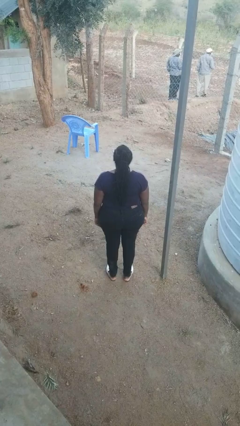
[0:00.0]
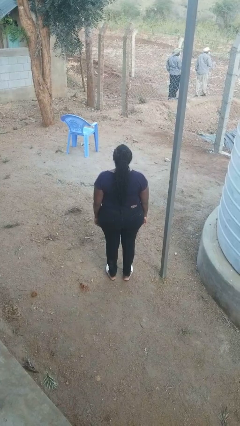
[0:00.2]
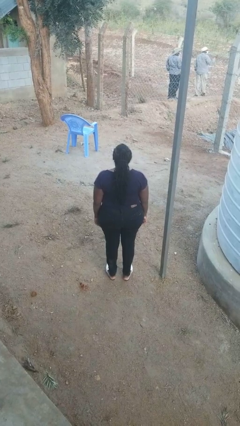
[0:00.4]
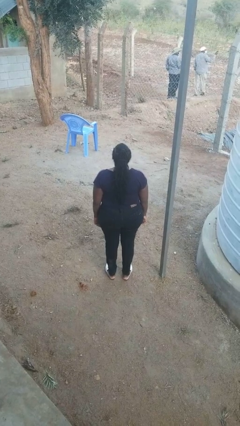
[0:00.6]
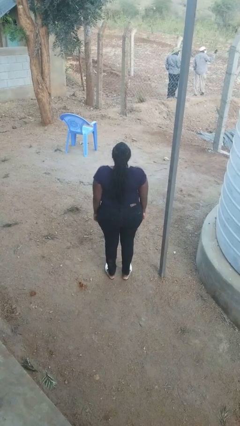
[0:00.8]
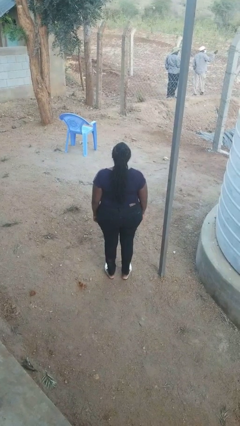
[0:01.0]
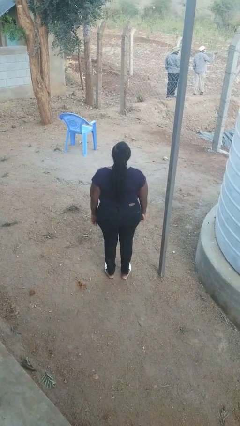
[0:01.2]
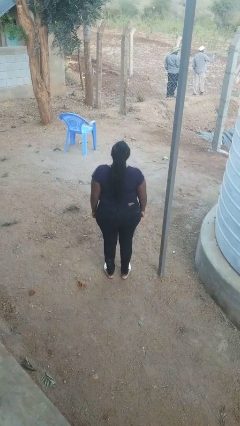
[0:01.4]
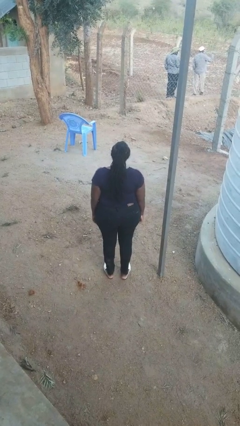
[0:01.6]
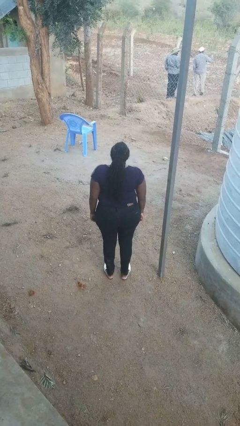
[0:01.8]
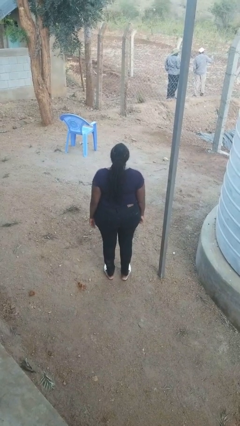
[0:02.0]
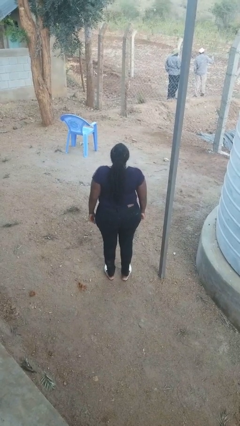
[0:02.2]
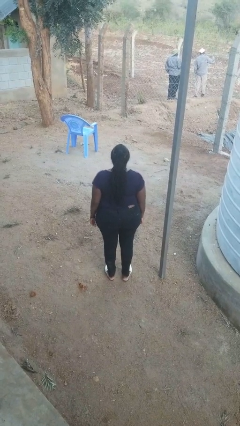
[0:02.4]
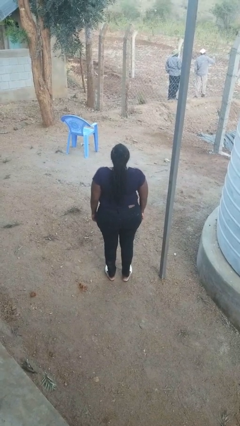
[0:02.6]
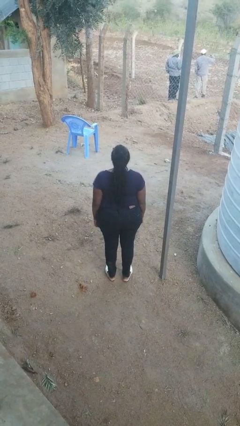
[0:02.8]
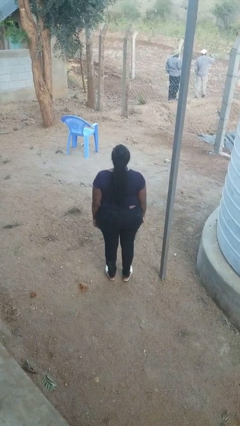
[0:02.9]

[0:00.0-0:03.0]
person shrugs

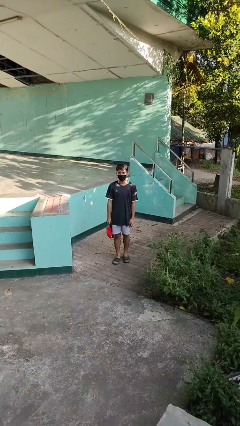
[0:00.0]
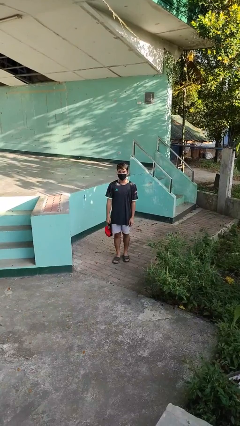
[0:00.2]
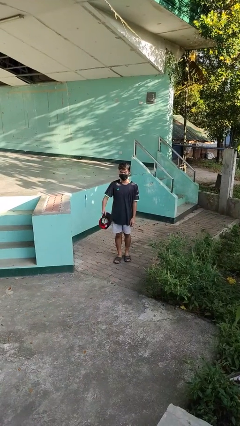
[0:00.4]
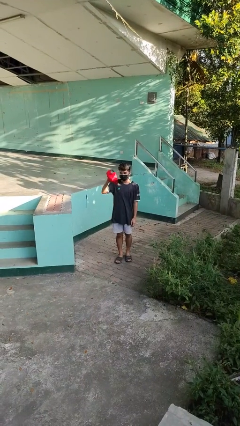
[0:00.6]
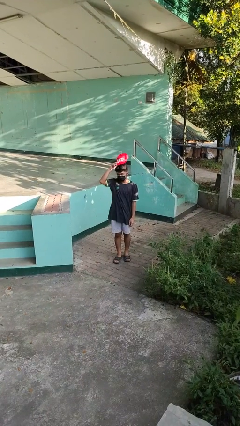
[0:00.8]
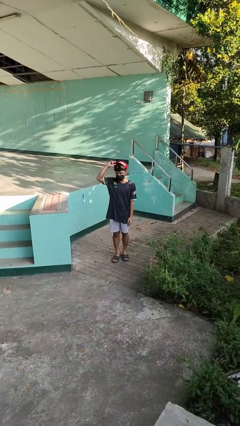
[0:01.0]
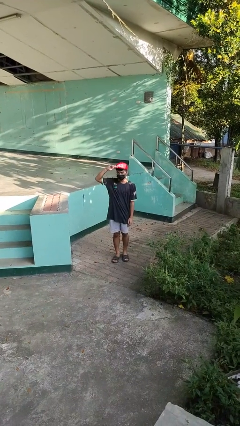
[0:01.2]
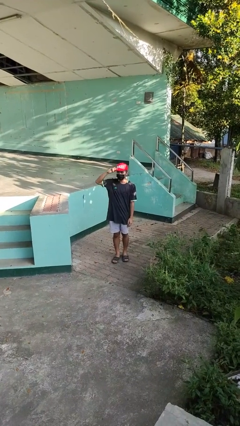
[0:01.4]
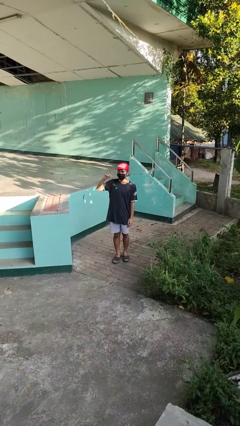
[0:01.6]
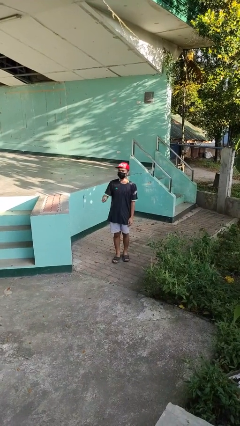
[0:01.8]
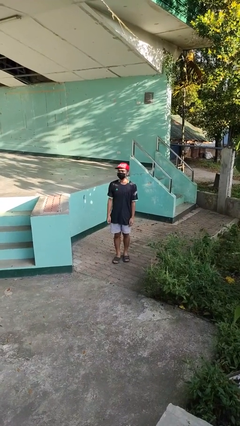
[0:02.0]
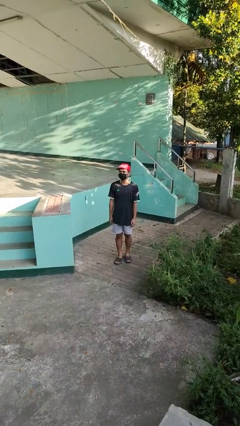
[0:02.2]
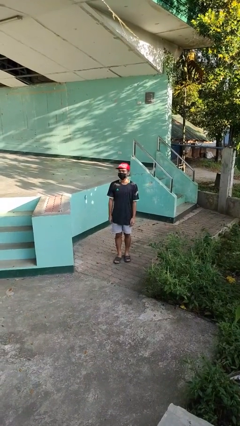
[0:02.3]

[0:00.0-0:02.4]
person puts on hat

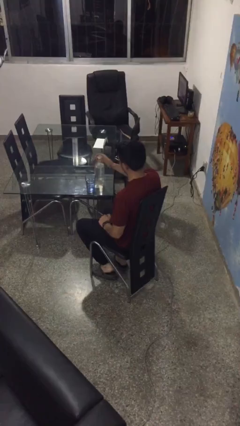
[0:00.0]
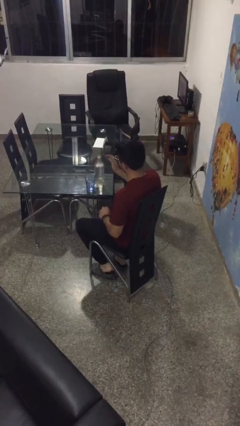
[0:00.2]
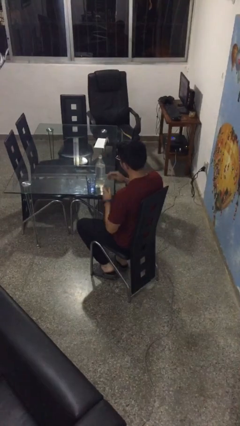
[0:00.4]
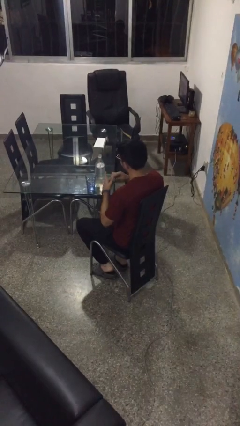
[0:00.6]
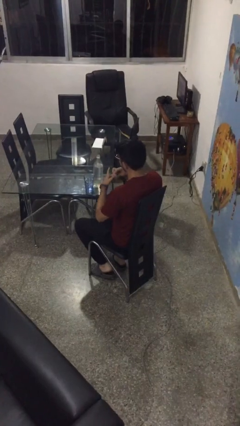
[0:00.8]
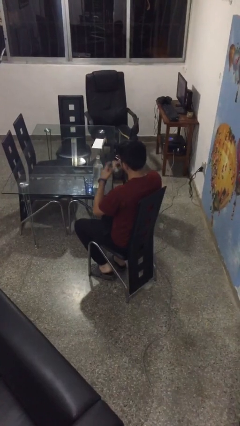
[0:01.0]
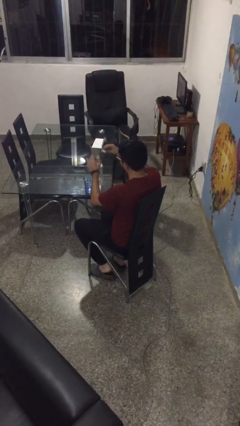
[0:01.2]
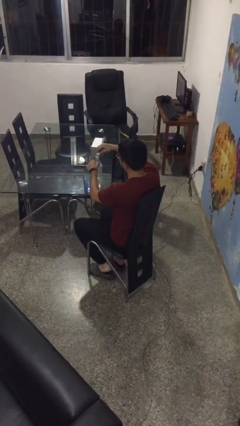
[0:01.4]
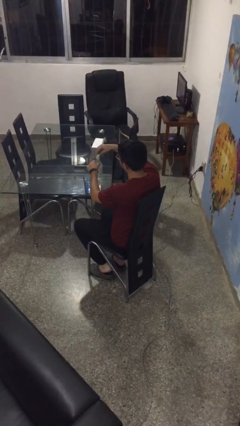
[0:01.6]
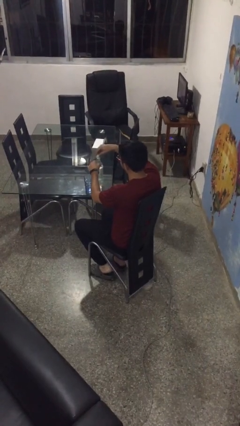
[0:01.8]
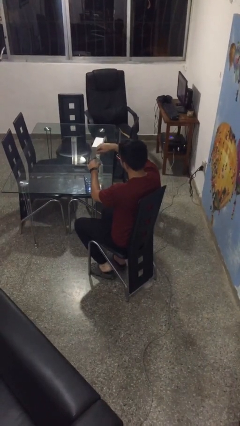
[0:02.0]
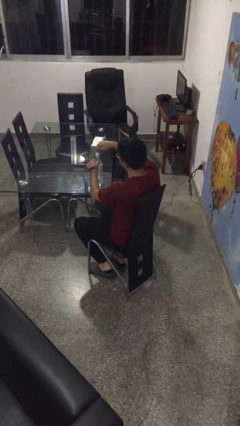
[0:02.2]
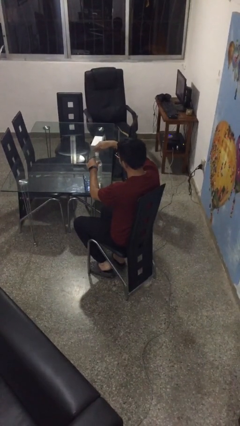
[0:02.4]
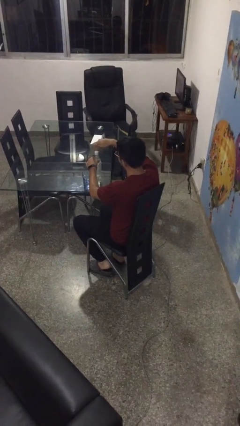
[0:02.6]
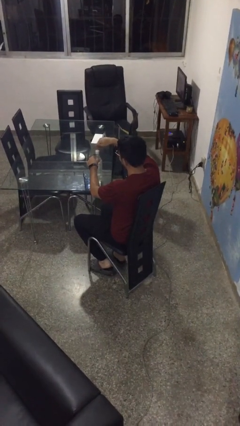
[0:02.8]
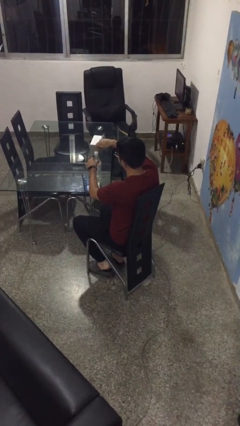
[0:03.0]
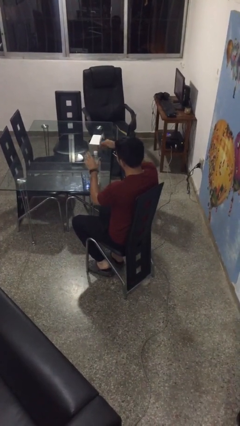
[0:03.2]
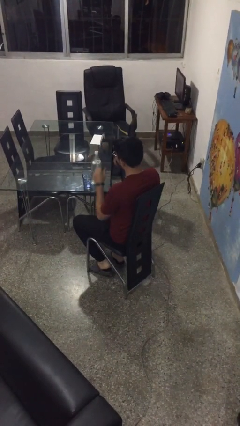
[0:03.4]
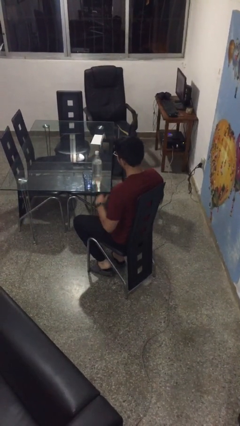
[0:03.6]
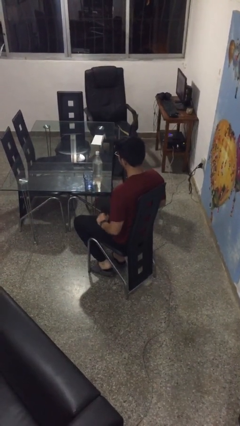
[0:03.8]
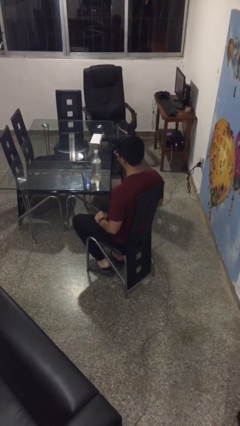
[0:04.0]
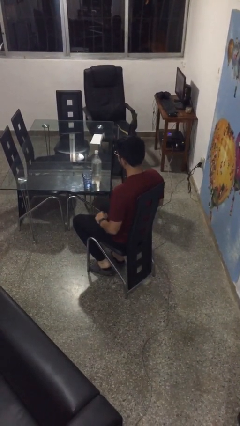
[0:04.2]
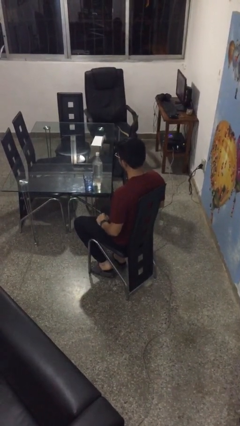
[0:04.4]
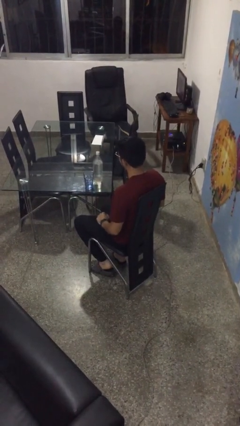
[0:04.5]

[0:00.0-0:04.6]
person screws lid to bottle

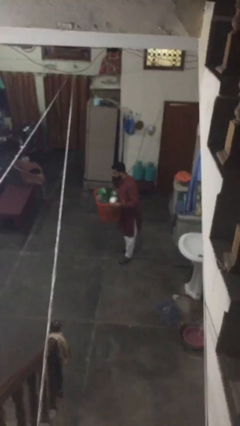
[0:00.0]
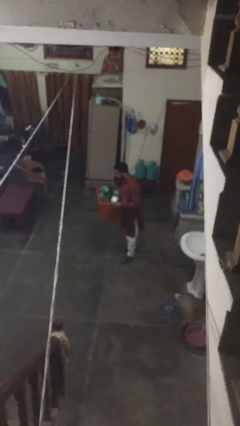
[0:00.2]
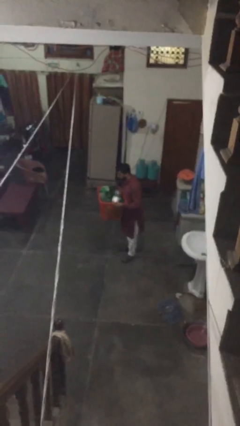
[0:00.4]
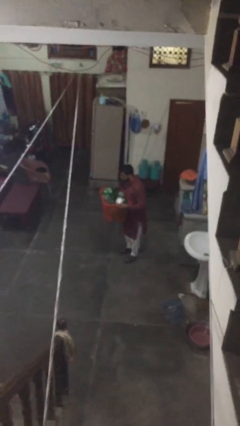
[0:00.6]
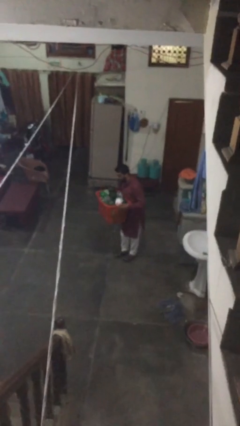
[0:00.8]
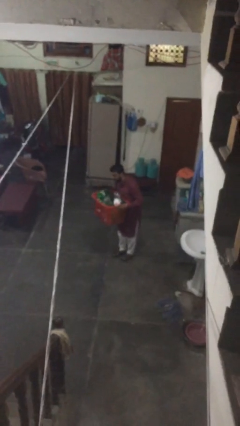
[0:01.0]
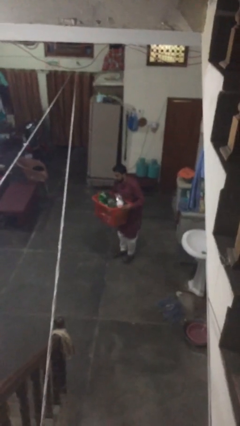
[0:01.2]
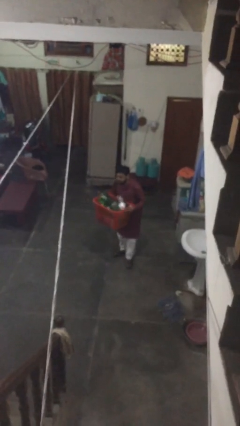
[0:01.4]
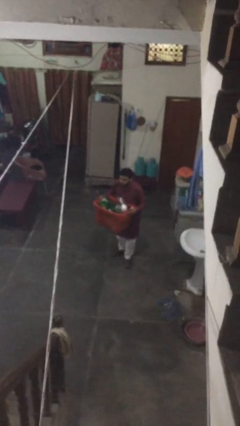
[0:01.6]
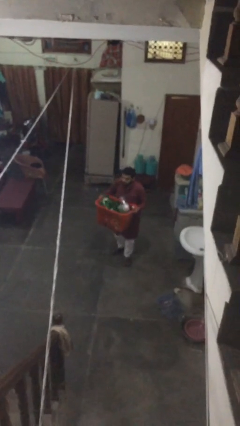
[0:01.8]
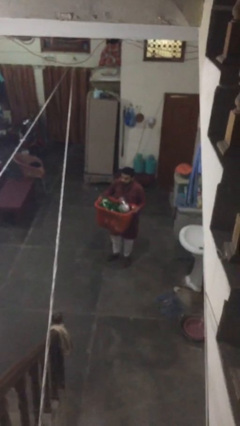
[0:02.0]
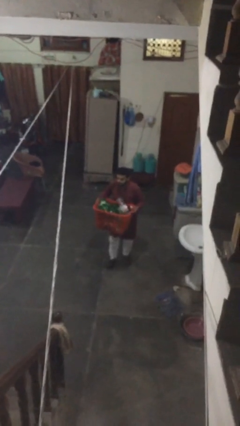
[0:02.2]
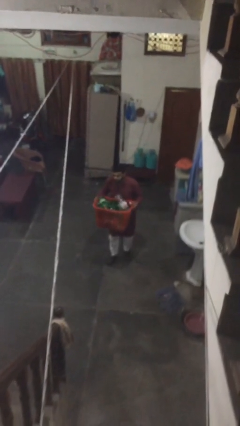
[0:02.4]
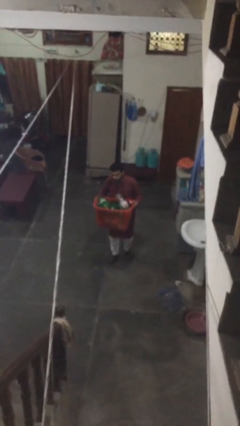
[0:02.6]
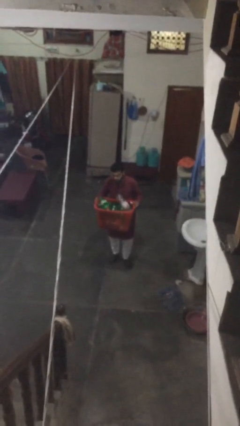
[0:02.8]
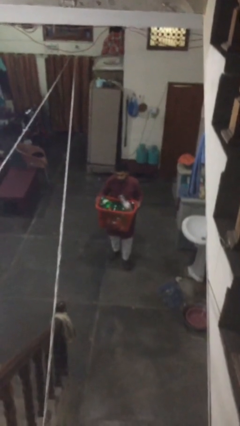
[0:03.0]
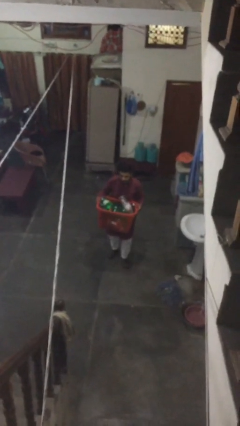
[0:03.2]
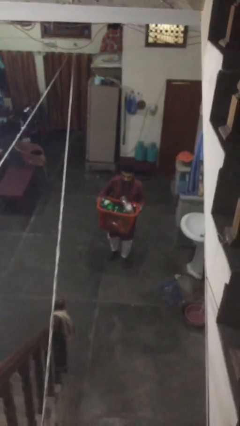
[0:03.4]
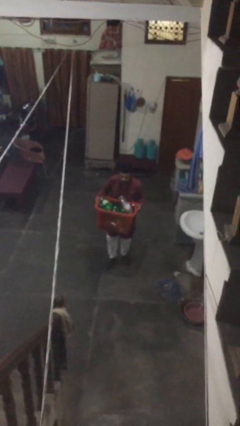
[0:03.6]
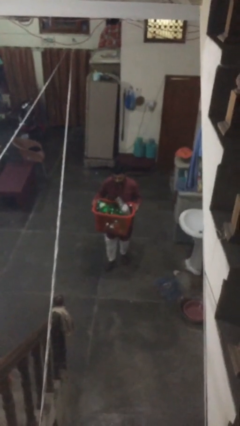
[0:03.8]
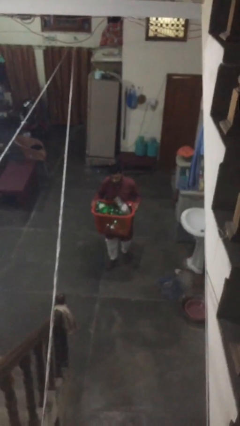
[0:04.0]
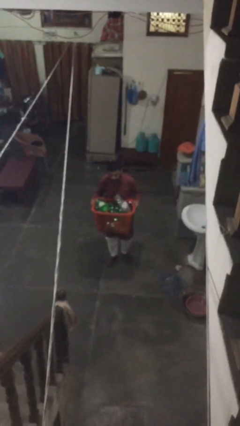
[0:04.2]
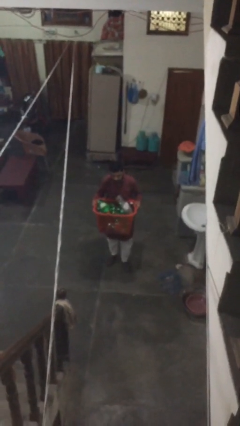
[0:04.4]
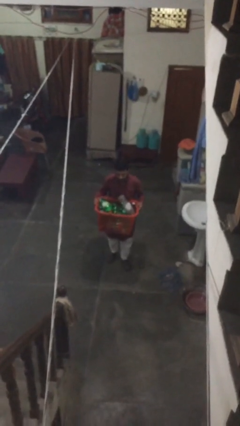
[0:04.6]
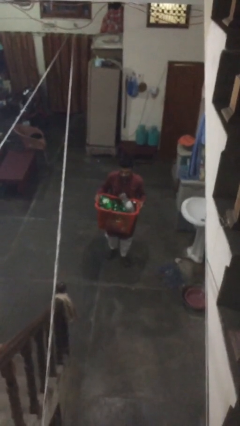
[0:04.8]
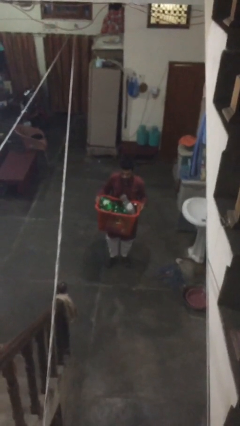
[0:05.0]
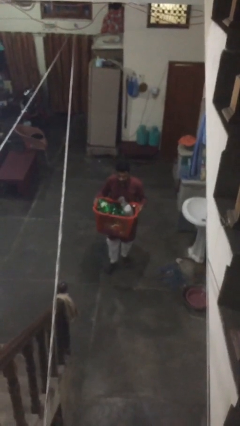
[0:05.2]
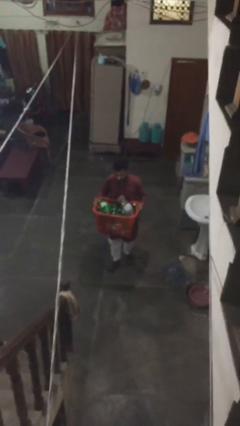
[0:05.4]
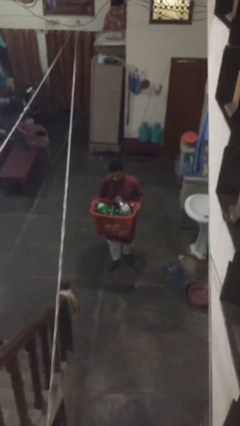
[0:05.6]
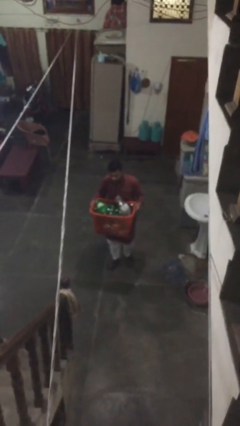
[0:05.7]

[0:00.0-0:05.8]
person carries heavy object

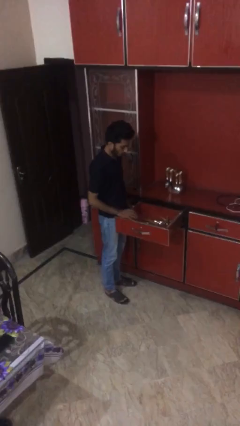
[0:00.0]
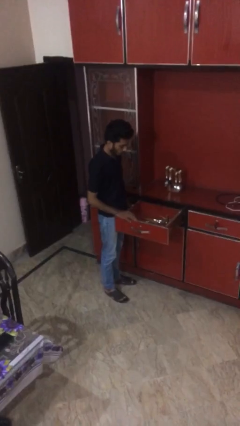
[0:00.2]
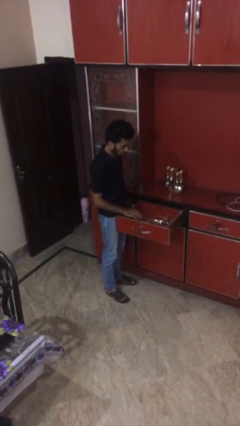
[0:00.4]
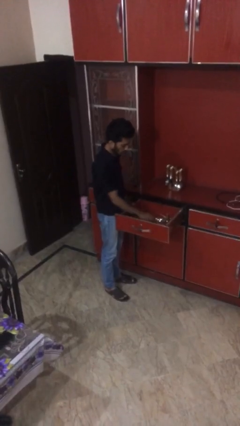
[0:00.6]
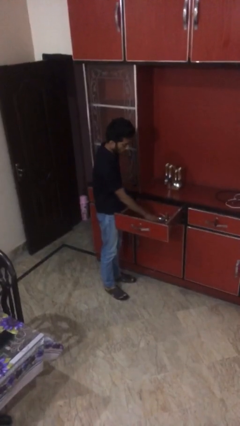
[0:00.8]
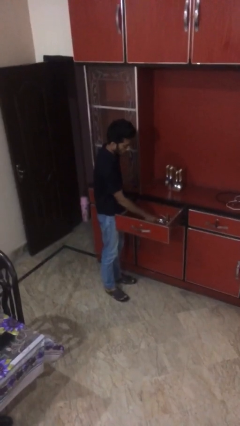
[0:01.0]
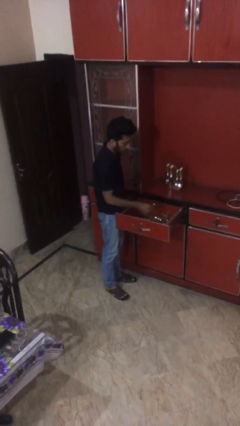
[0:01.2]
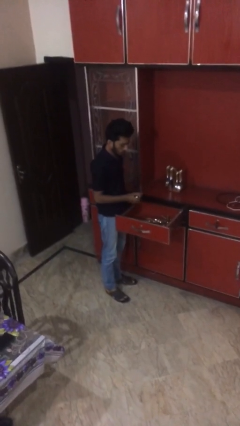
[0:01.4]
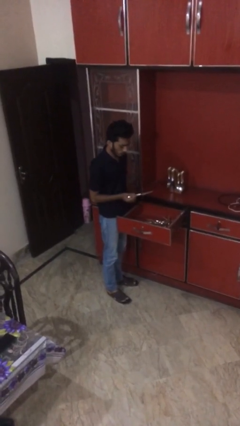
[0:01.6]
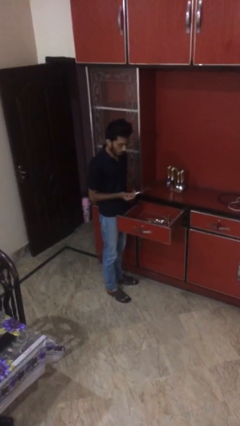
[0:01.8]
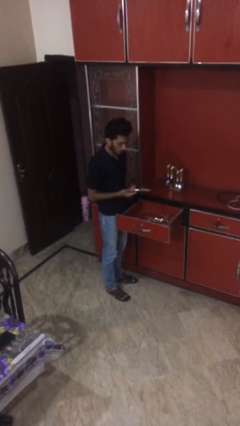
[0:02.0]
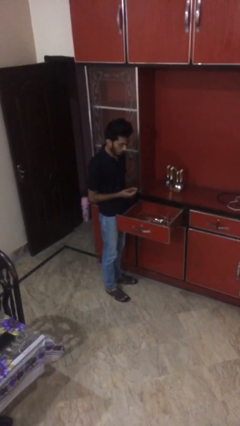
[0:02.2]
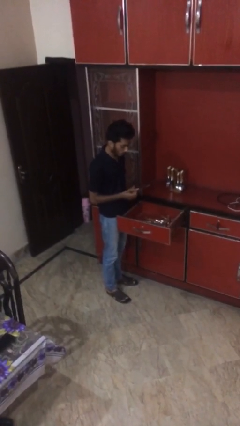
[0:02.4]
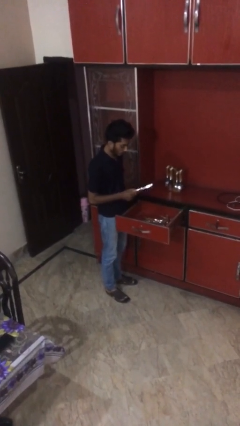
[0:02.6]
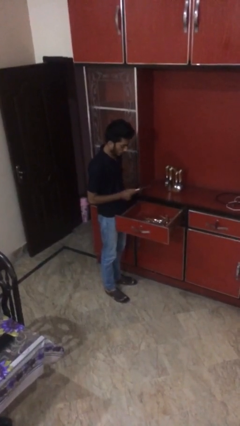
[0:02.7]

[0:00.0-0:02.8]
person takes object from kitchen drawer
